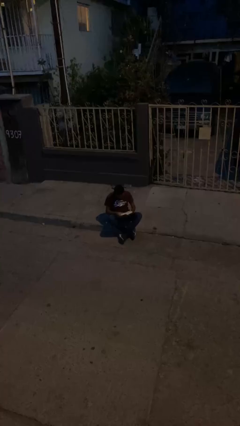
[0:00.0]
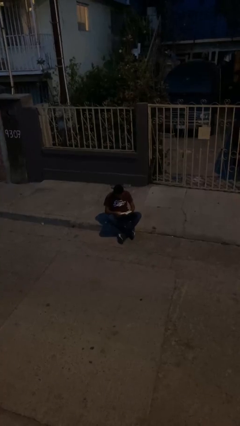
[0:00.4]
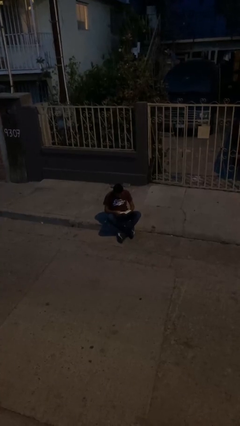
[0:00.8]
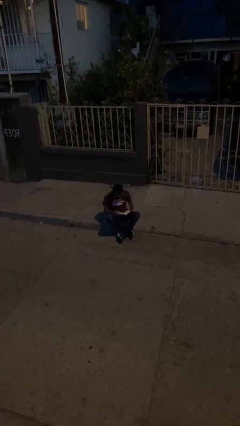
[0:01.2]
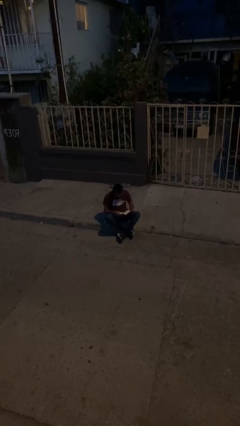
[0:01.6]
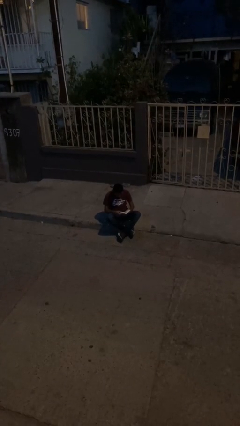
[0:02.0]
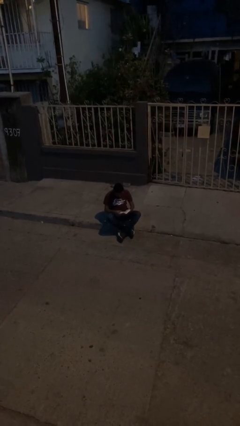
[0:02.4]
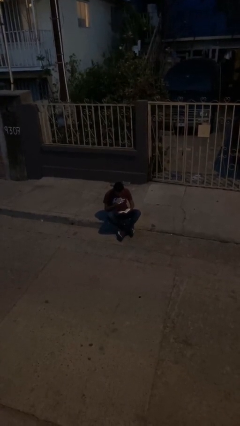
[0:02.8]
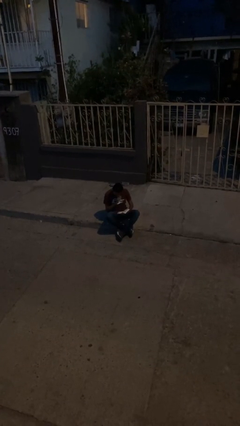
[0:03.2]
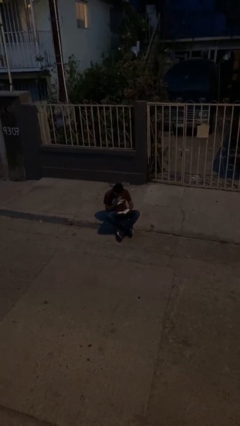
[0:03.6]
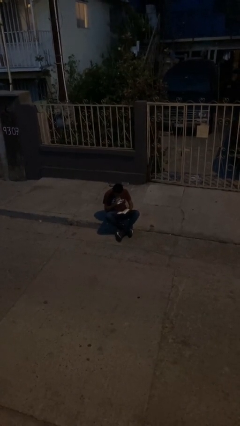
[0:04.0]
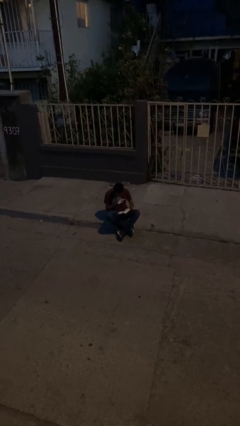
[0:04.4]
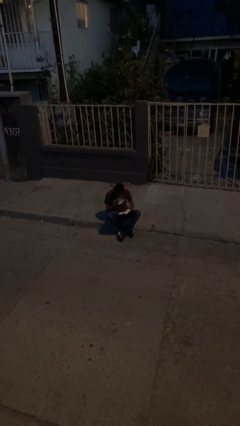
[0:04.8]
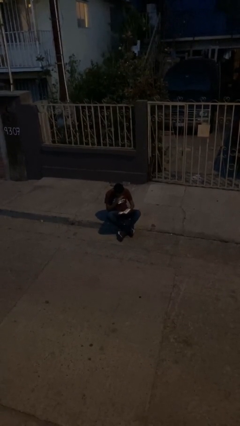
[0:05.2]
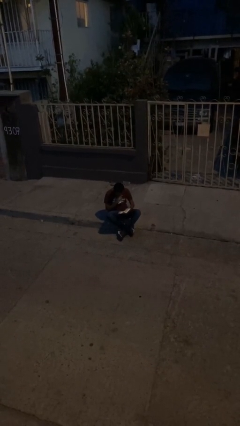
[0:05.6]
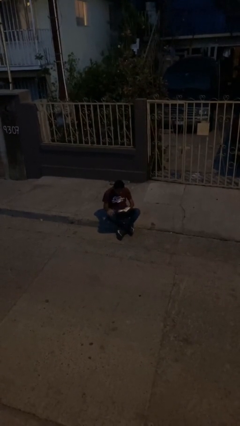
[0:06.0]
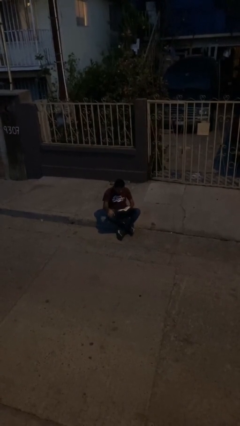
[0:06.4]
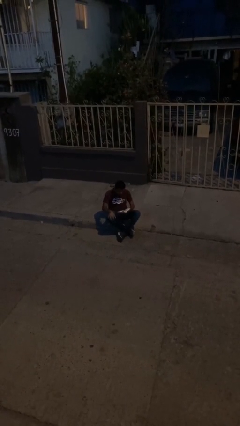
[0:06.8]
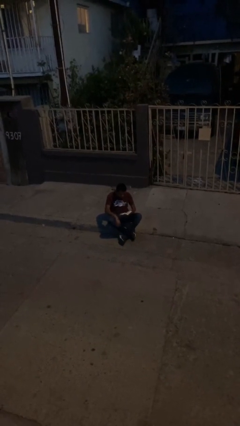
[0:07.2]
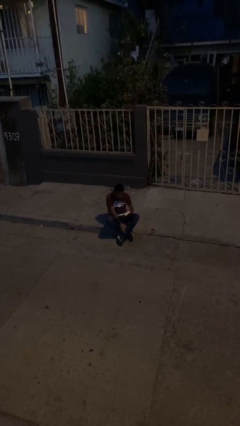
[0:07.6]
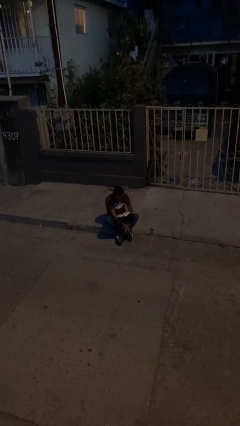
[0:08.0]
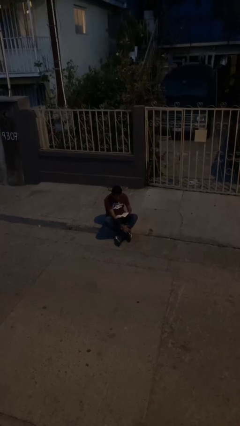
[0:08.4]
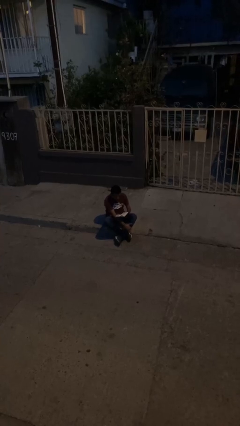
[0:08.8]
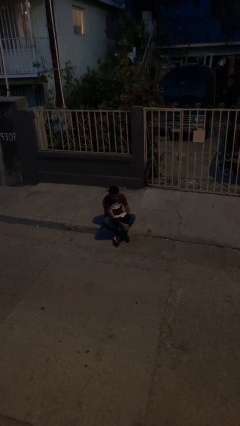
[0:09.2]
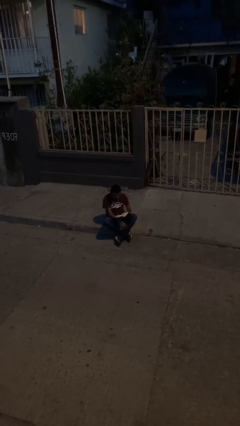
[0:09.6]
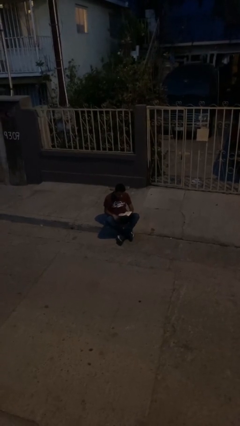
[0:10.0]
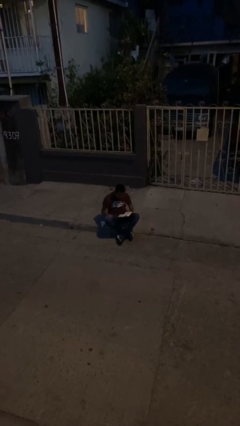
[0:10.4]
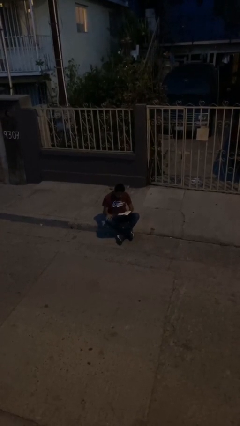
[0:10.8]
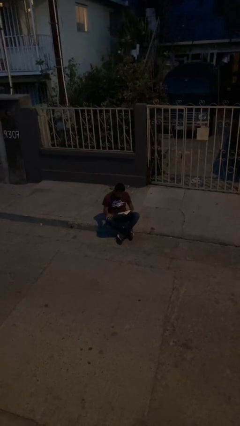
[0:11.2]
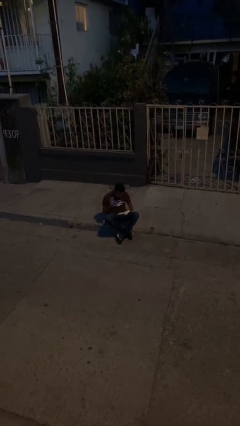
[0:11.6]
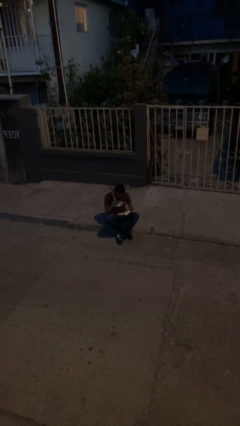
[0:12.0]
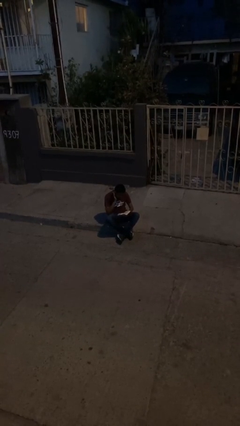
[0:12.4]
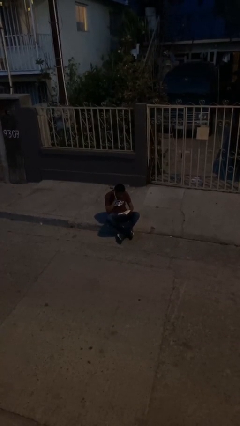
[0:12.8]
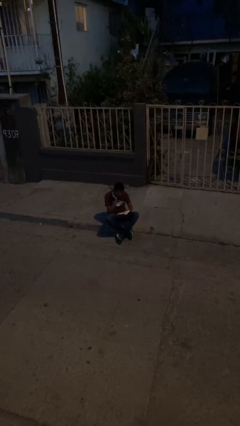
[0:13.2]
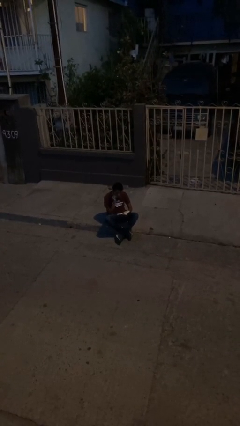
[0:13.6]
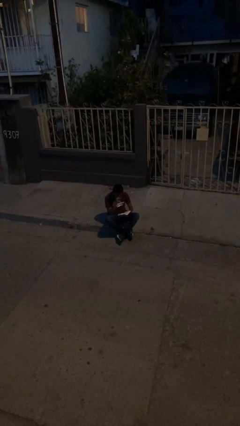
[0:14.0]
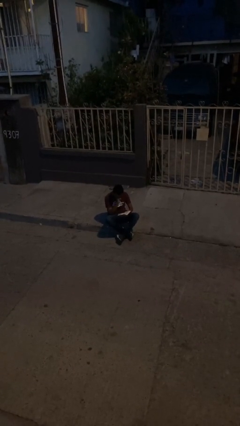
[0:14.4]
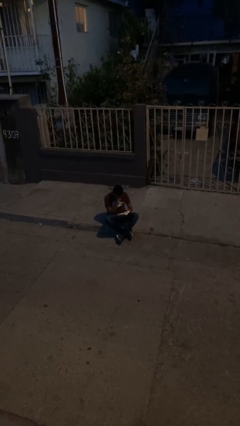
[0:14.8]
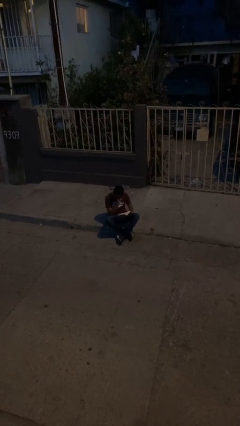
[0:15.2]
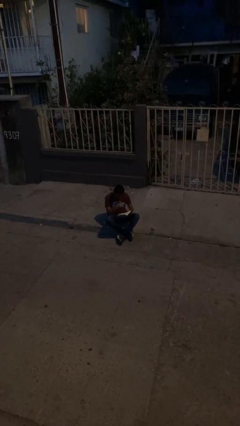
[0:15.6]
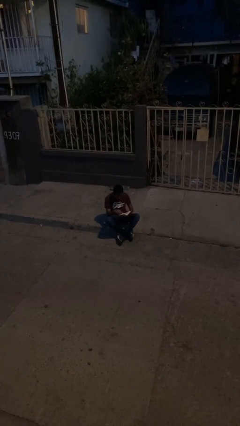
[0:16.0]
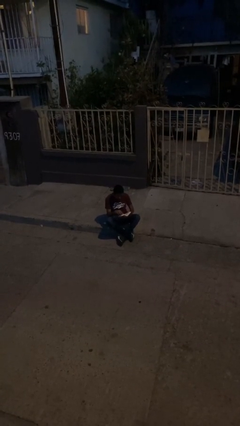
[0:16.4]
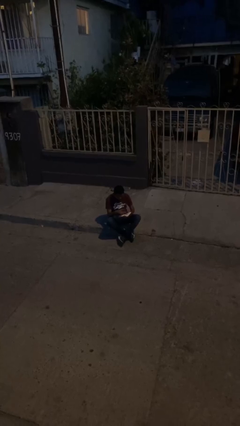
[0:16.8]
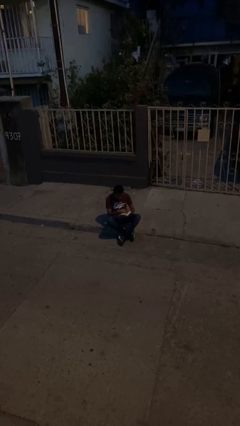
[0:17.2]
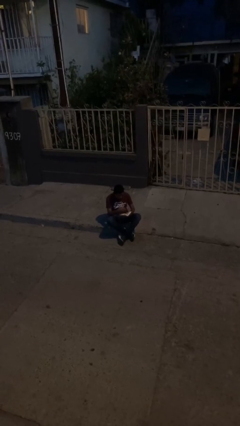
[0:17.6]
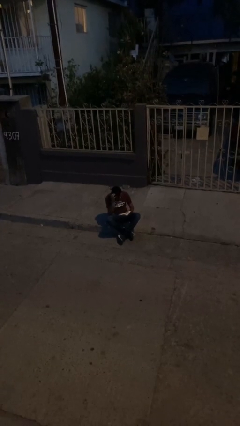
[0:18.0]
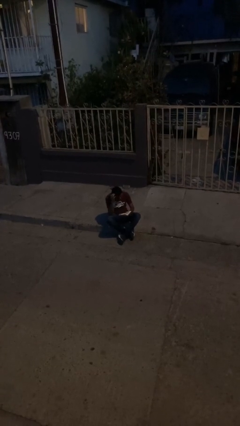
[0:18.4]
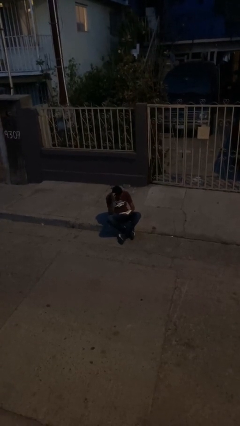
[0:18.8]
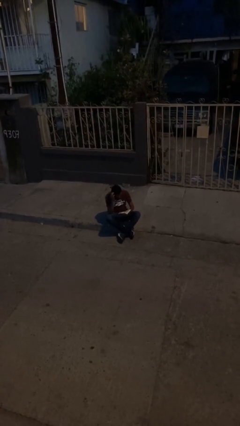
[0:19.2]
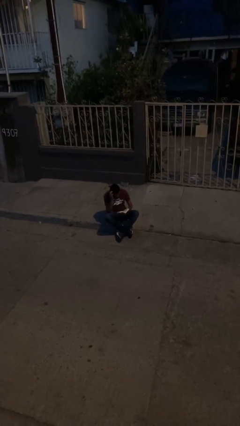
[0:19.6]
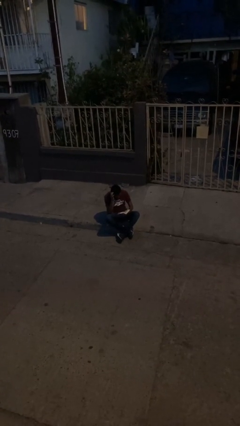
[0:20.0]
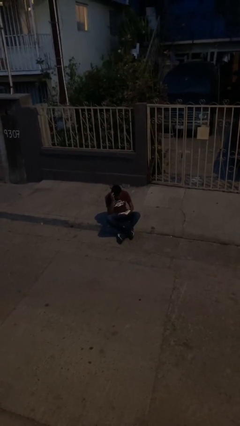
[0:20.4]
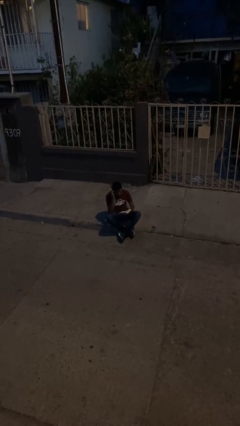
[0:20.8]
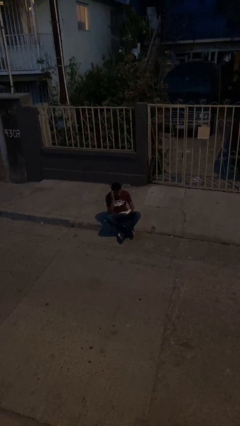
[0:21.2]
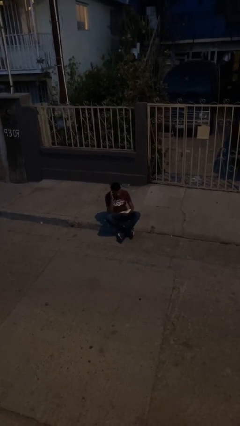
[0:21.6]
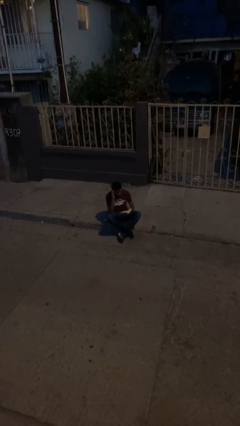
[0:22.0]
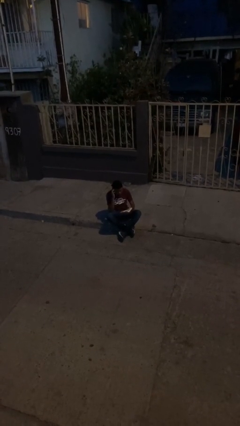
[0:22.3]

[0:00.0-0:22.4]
person reads document

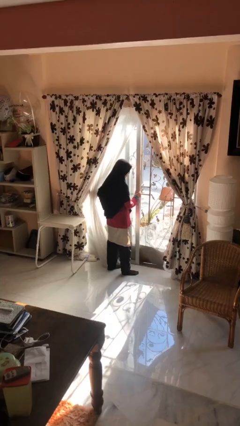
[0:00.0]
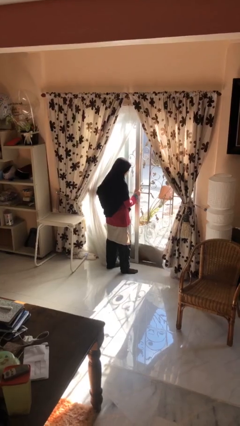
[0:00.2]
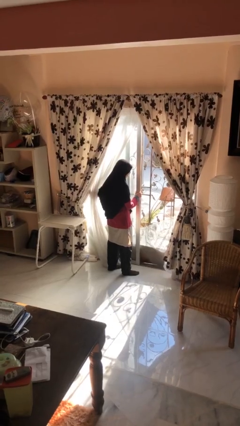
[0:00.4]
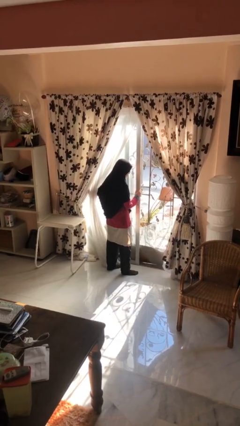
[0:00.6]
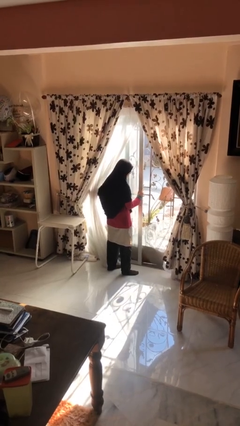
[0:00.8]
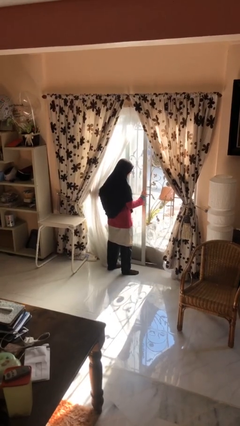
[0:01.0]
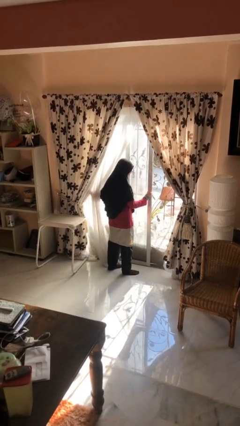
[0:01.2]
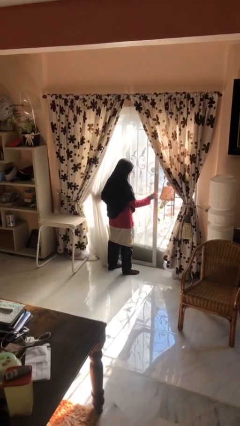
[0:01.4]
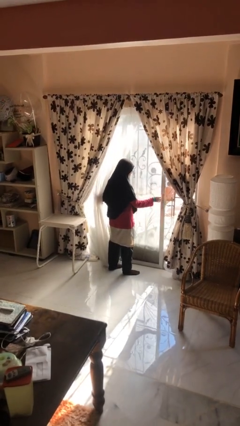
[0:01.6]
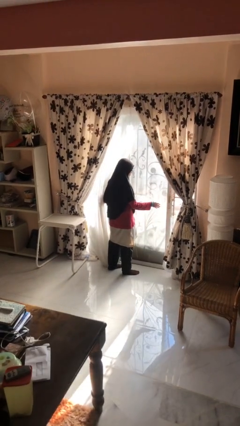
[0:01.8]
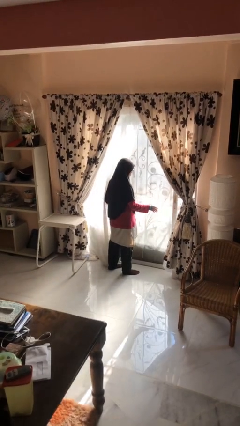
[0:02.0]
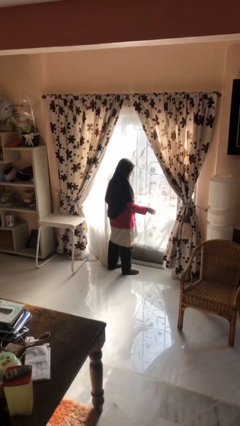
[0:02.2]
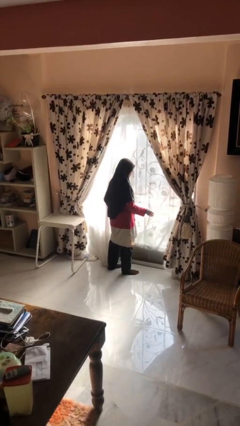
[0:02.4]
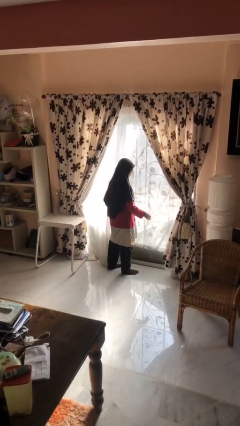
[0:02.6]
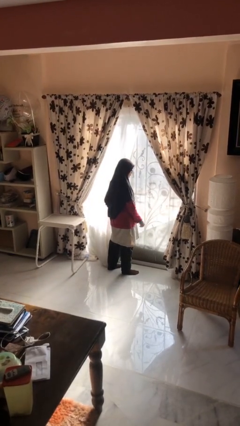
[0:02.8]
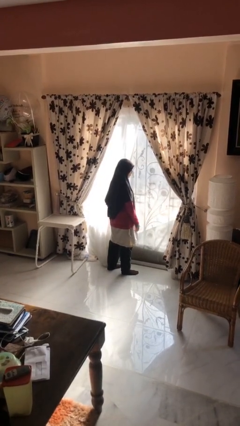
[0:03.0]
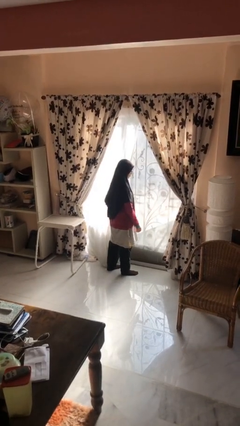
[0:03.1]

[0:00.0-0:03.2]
person closes sliding door

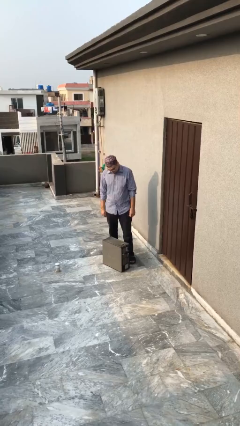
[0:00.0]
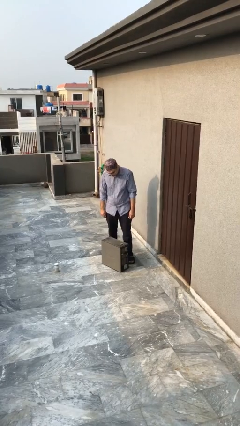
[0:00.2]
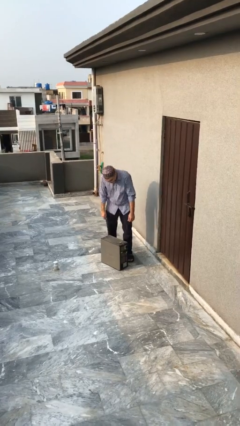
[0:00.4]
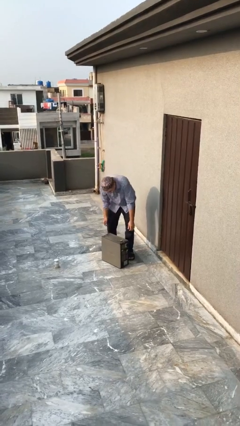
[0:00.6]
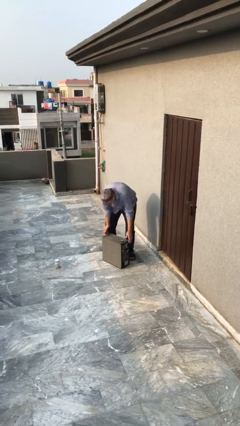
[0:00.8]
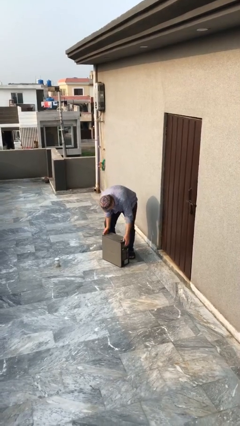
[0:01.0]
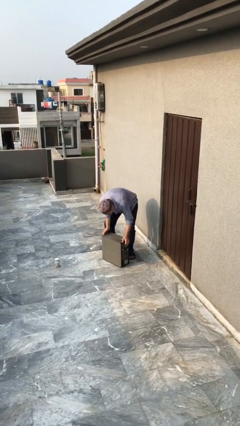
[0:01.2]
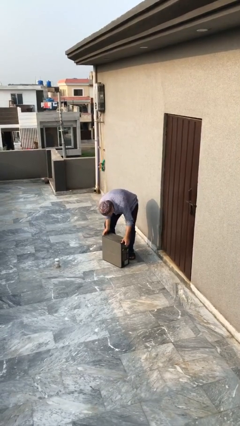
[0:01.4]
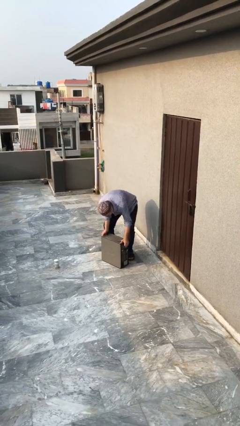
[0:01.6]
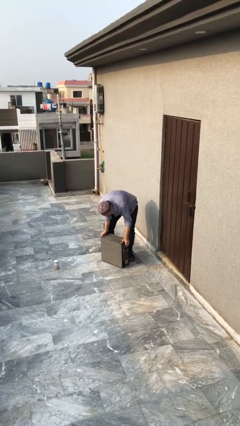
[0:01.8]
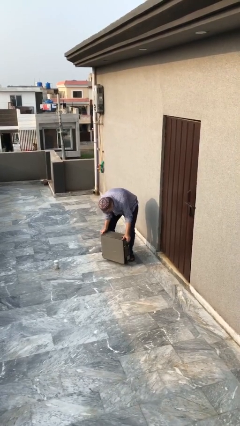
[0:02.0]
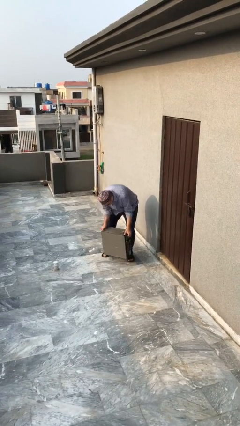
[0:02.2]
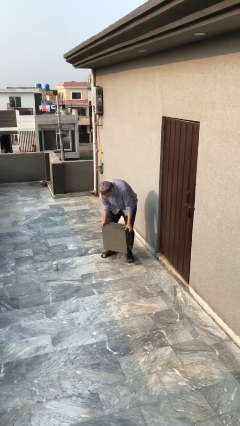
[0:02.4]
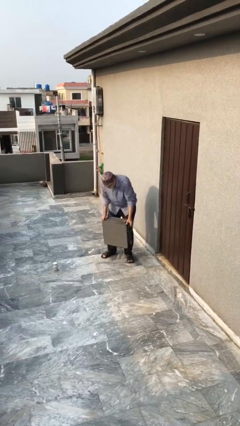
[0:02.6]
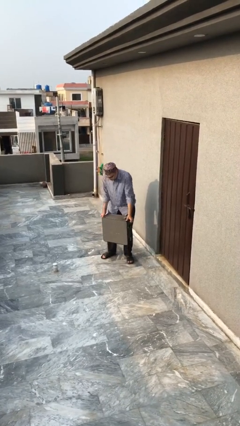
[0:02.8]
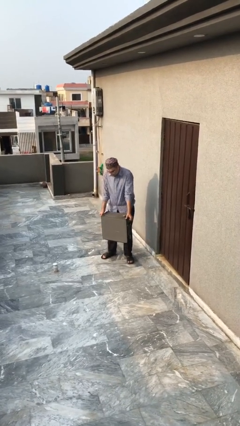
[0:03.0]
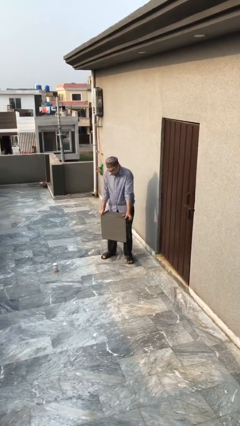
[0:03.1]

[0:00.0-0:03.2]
person picks up object from floor

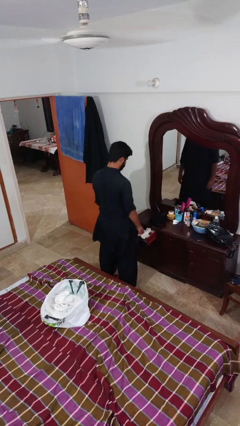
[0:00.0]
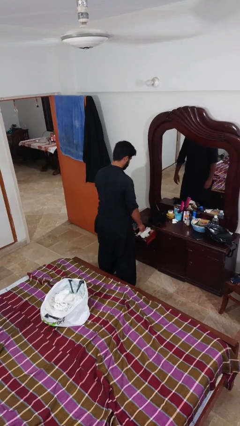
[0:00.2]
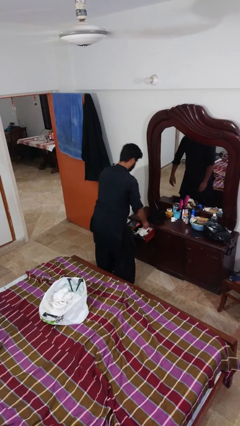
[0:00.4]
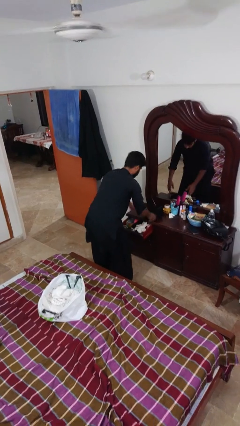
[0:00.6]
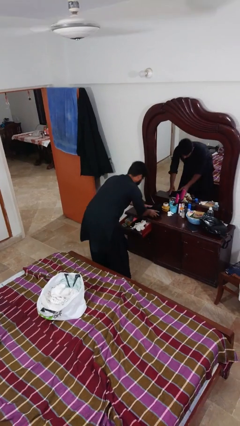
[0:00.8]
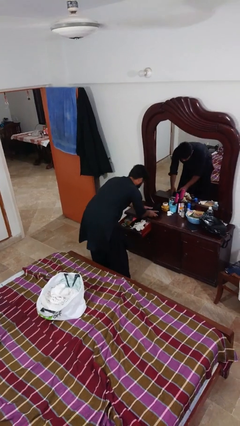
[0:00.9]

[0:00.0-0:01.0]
person puts clothes into dresser
